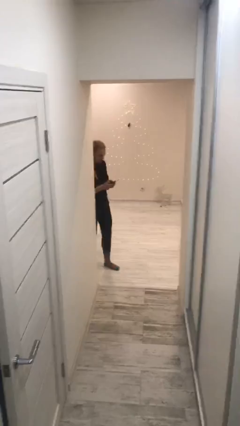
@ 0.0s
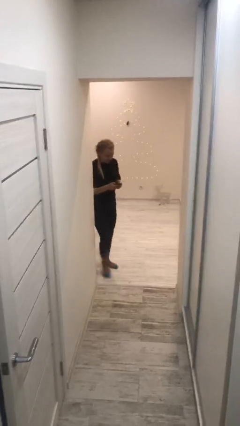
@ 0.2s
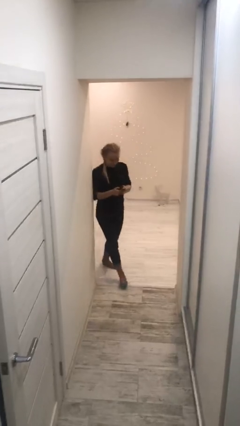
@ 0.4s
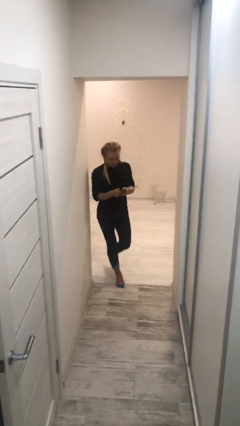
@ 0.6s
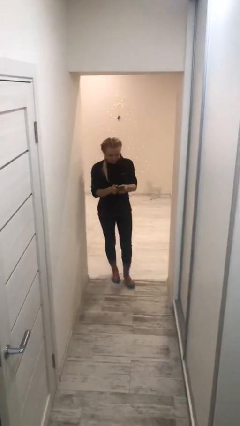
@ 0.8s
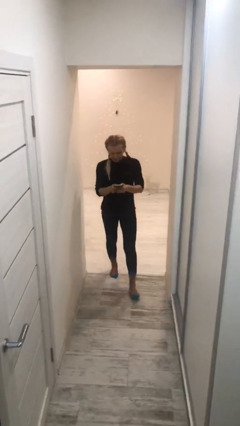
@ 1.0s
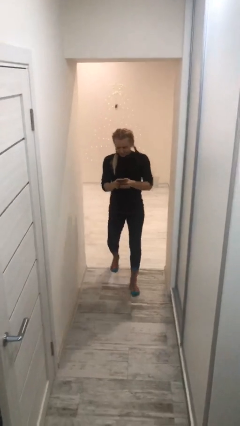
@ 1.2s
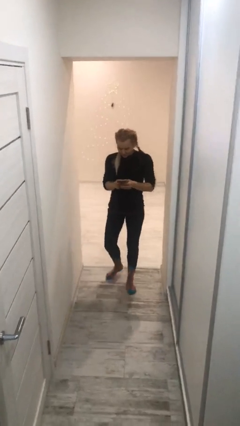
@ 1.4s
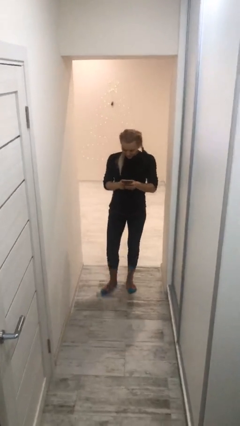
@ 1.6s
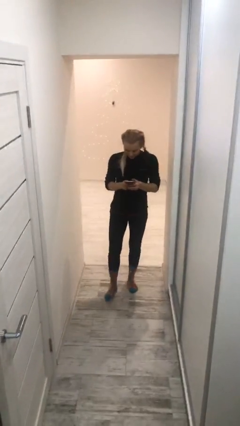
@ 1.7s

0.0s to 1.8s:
person enters scene through structure

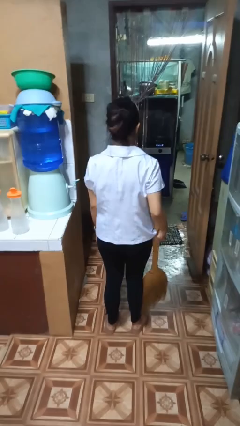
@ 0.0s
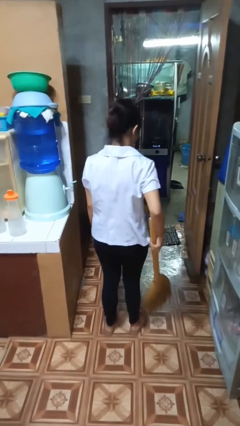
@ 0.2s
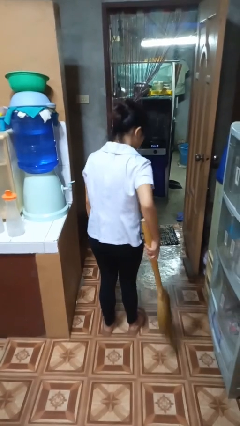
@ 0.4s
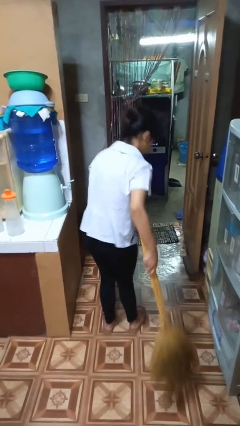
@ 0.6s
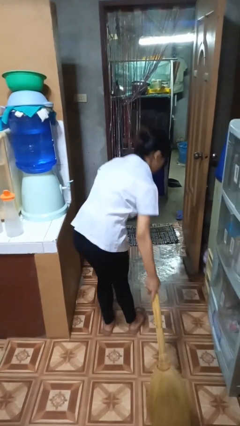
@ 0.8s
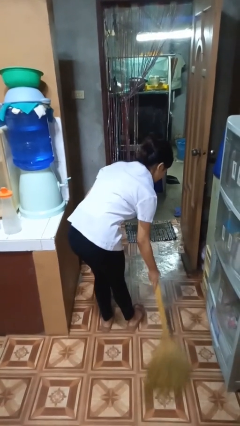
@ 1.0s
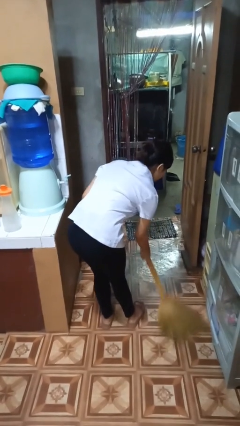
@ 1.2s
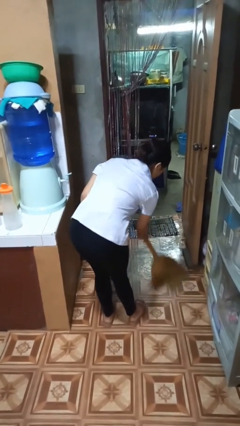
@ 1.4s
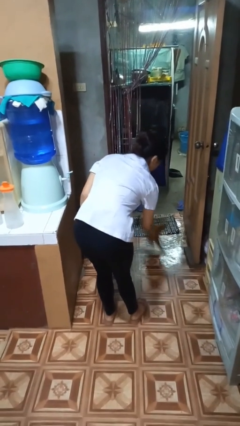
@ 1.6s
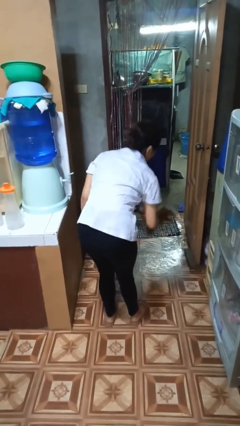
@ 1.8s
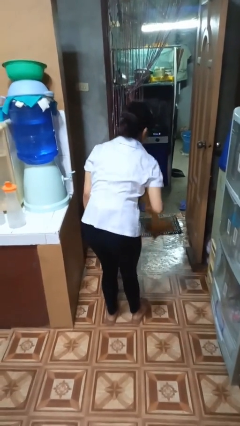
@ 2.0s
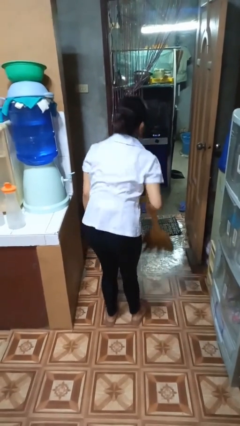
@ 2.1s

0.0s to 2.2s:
person sweeps floor

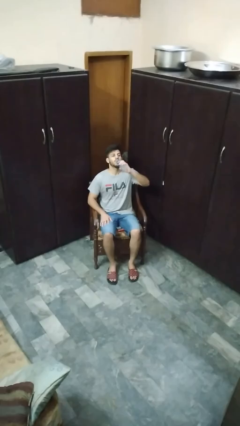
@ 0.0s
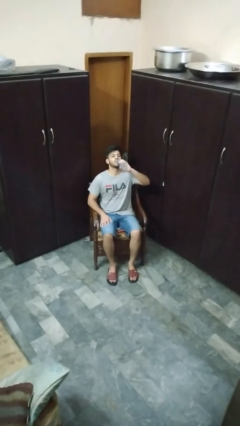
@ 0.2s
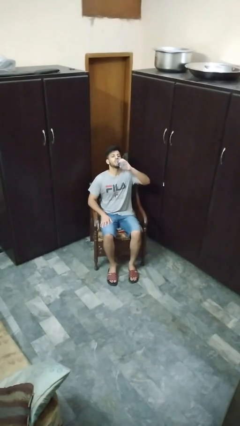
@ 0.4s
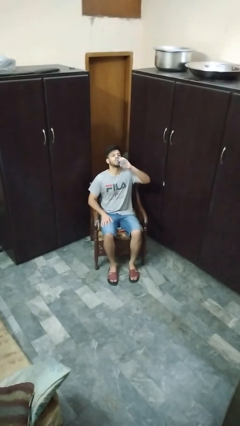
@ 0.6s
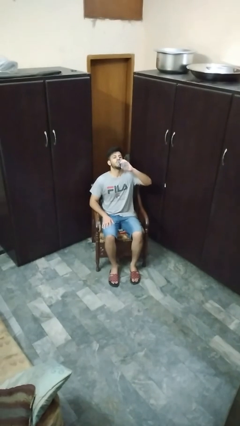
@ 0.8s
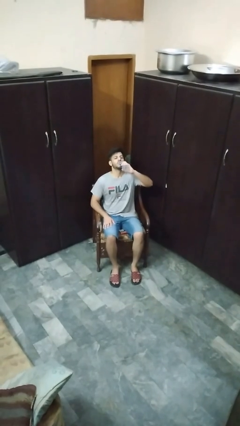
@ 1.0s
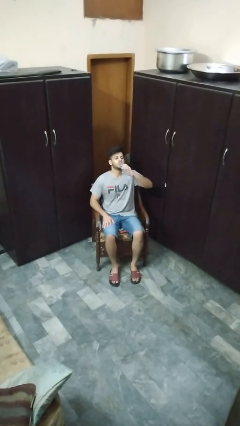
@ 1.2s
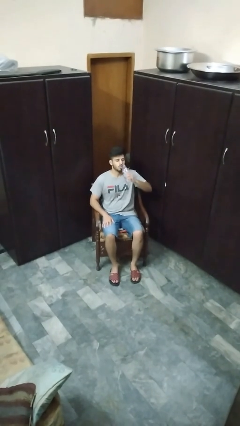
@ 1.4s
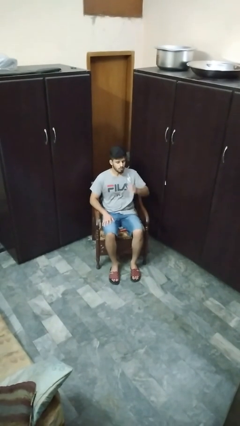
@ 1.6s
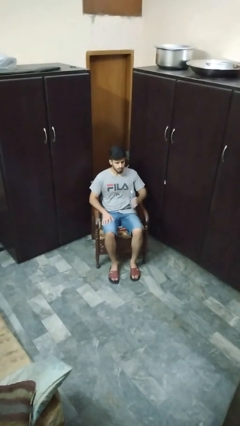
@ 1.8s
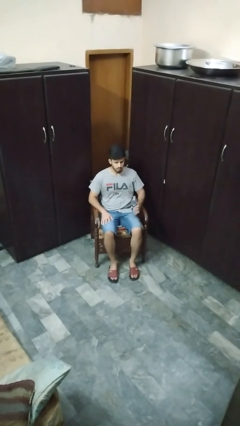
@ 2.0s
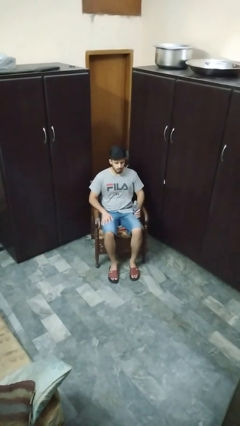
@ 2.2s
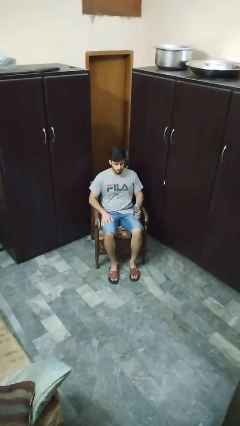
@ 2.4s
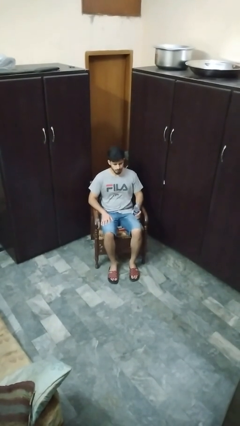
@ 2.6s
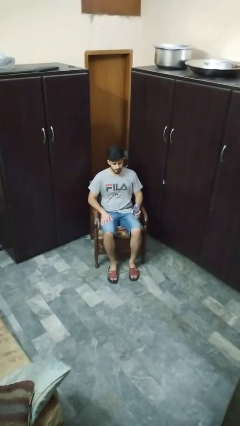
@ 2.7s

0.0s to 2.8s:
person drinks from bottle

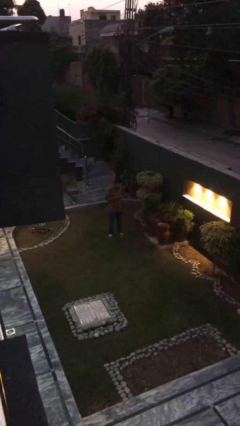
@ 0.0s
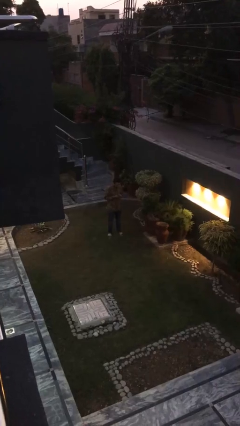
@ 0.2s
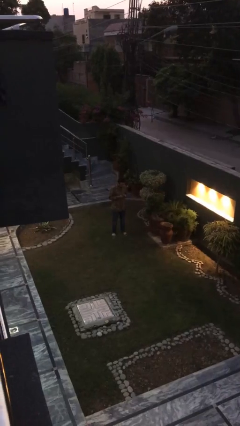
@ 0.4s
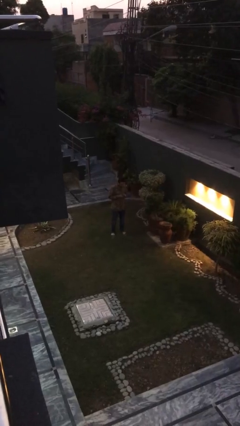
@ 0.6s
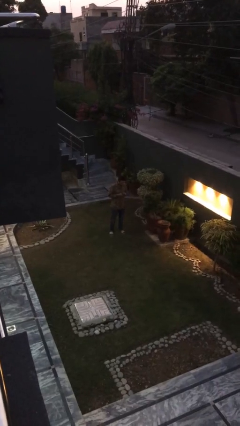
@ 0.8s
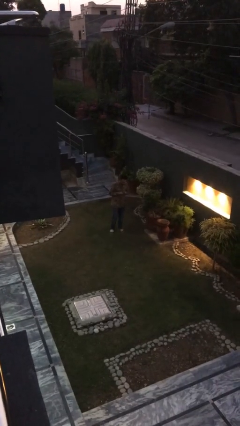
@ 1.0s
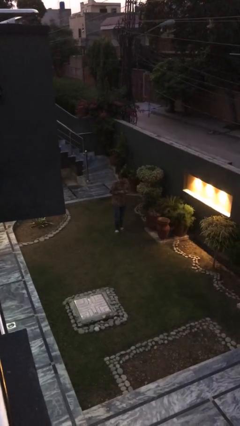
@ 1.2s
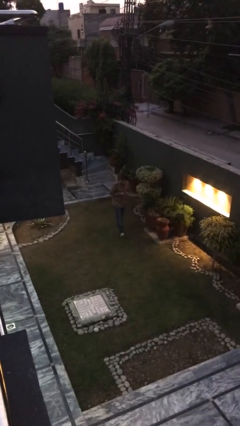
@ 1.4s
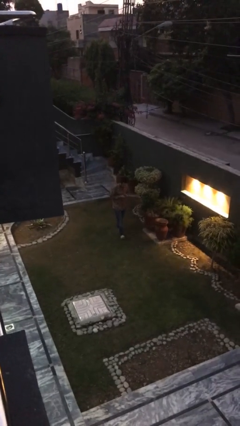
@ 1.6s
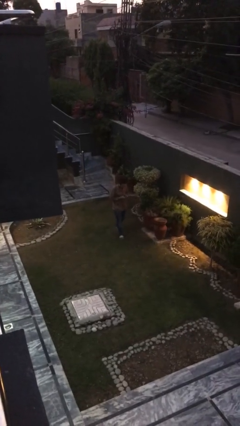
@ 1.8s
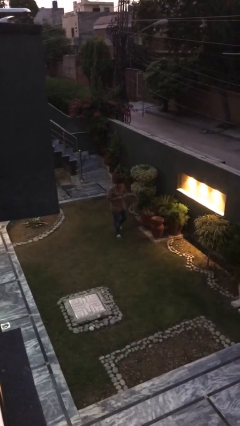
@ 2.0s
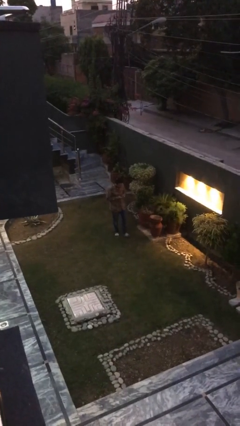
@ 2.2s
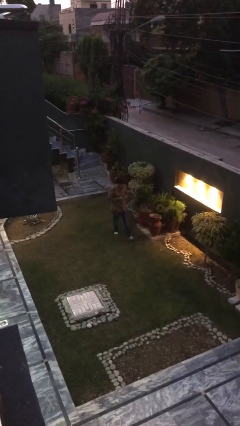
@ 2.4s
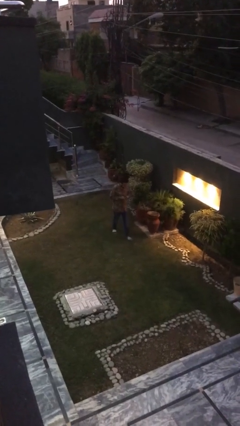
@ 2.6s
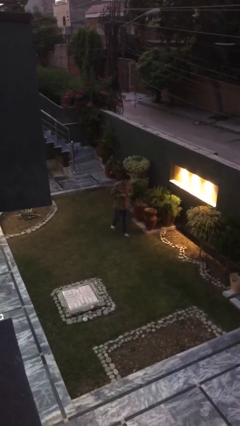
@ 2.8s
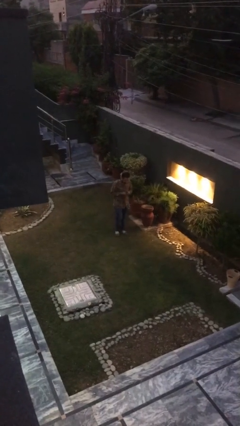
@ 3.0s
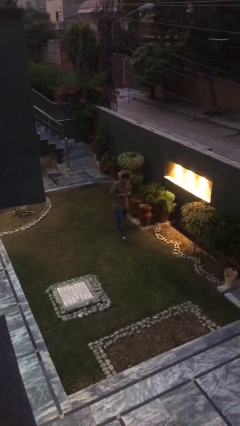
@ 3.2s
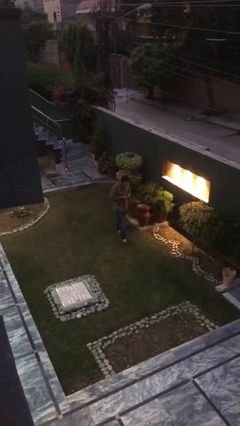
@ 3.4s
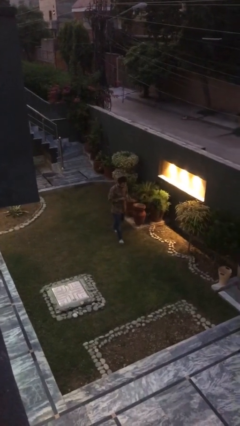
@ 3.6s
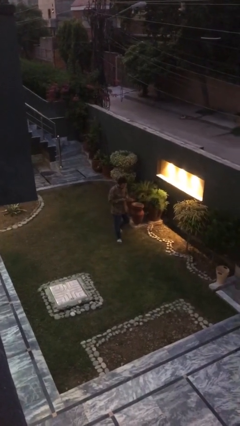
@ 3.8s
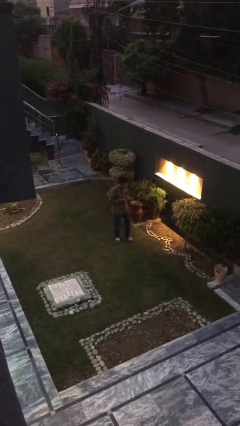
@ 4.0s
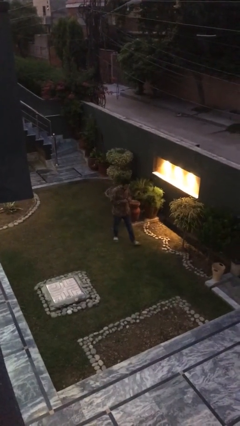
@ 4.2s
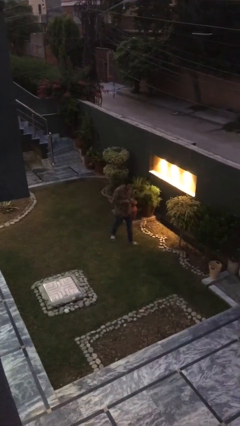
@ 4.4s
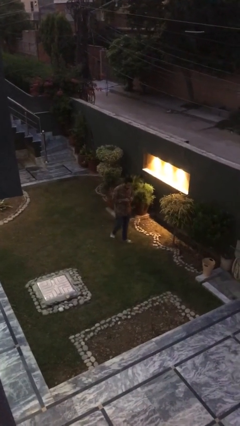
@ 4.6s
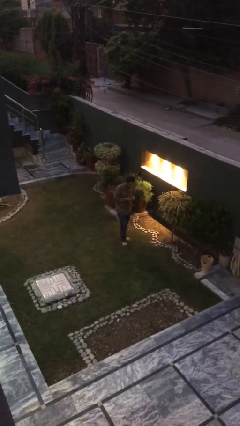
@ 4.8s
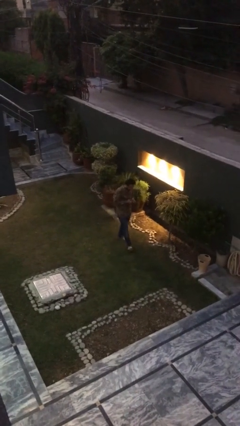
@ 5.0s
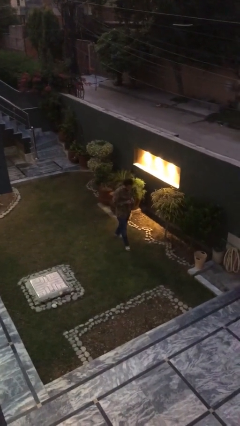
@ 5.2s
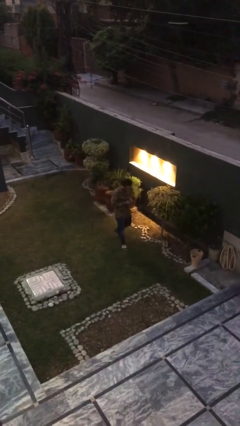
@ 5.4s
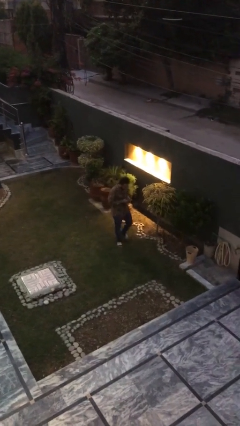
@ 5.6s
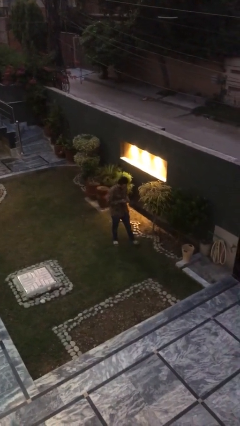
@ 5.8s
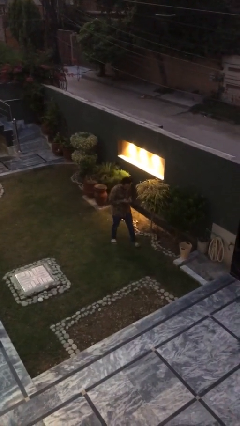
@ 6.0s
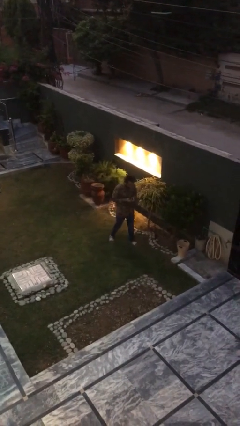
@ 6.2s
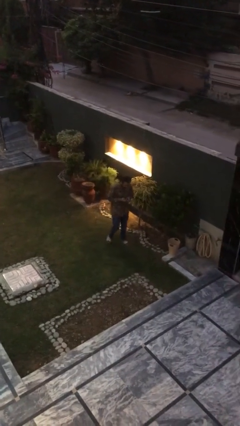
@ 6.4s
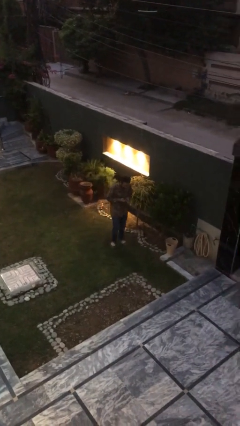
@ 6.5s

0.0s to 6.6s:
person texts on phone

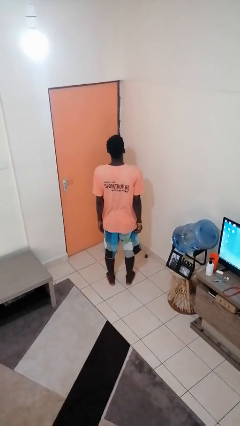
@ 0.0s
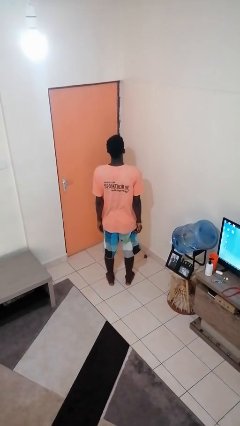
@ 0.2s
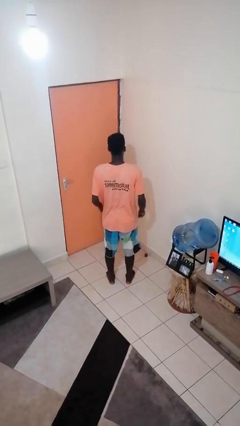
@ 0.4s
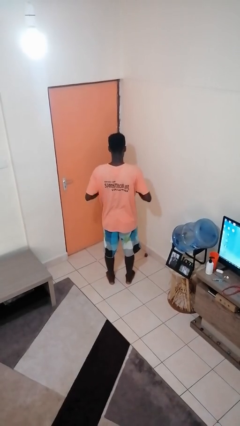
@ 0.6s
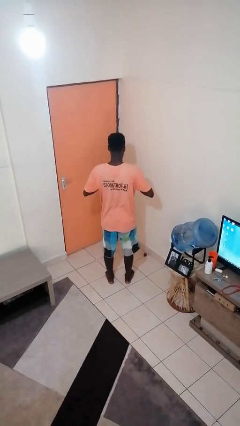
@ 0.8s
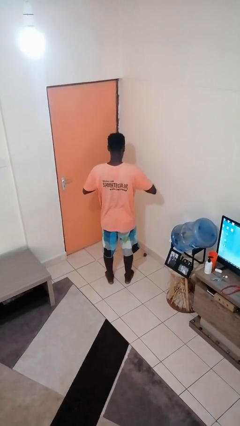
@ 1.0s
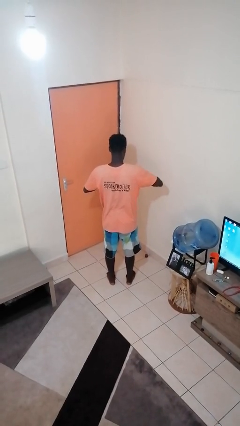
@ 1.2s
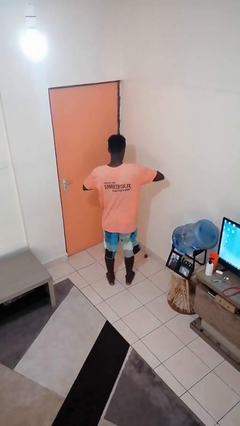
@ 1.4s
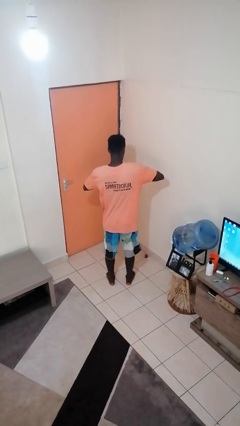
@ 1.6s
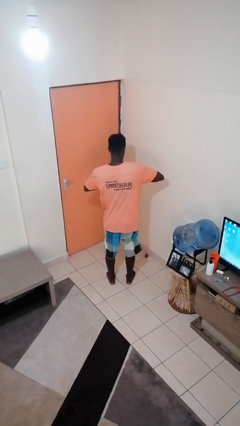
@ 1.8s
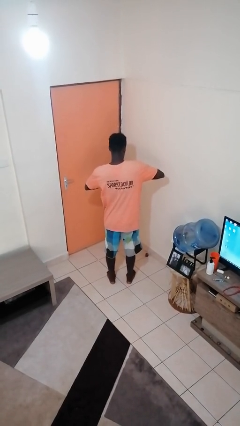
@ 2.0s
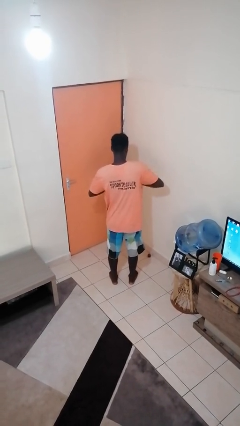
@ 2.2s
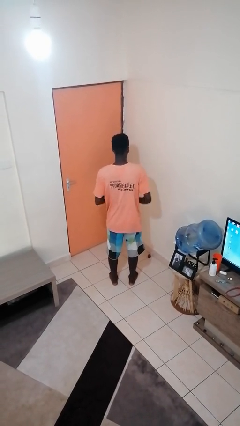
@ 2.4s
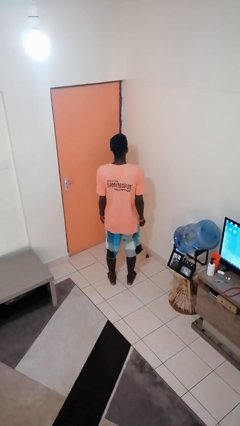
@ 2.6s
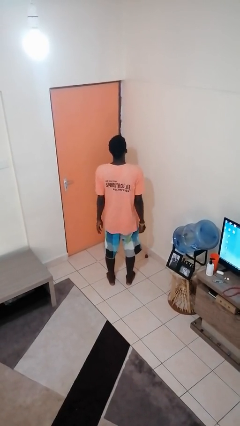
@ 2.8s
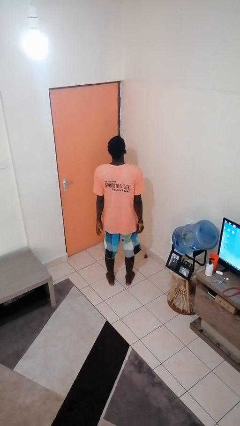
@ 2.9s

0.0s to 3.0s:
person puts on ring

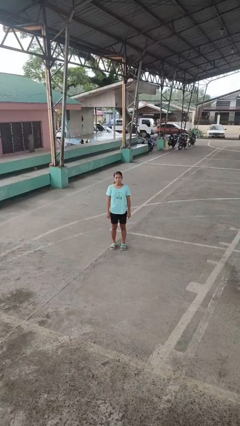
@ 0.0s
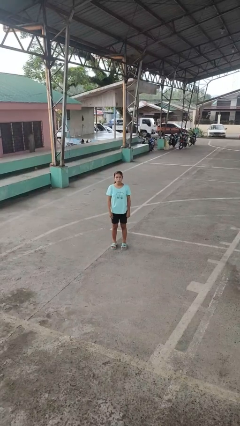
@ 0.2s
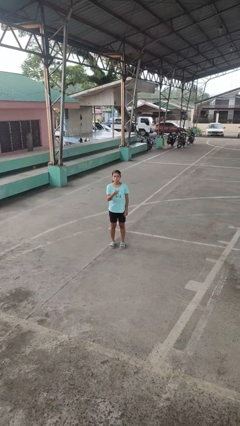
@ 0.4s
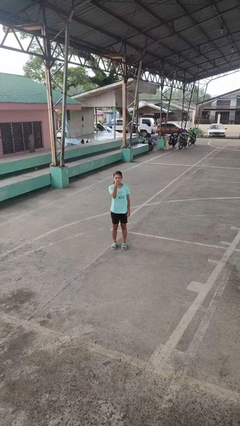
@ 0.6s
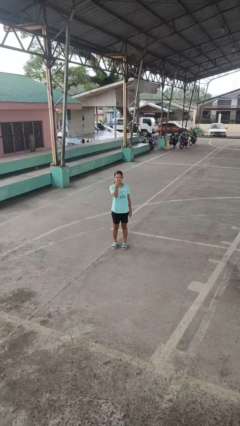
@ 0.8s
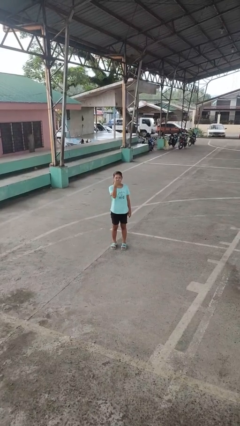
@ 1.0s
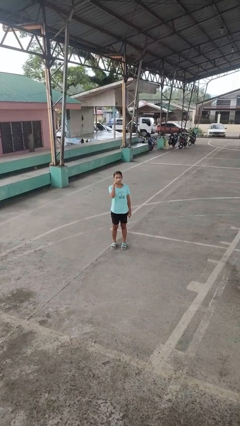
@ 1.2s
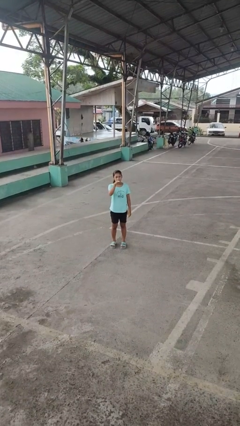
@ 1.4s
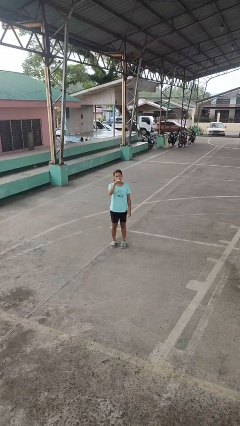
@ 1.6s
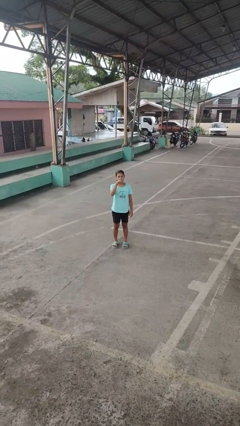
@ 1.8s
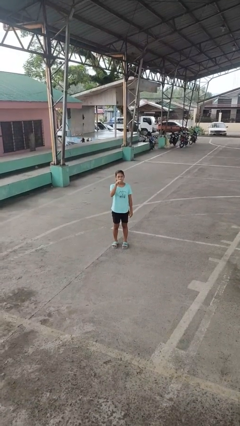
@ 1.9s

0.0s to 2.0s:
person gestures watch closely
